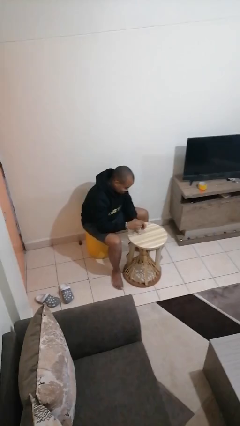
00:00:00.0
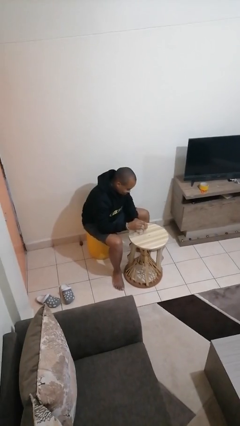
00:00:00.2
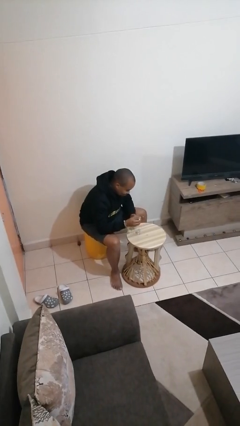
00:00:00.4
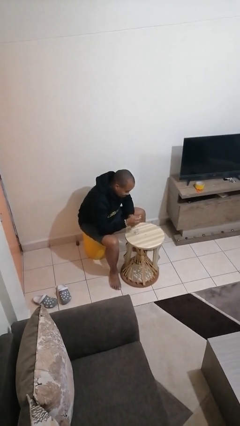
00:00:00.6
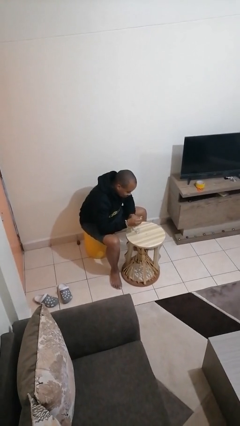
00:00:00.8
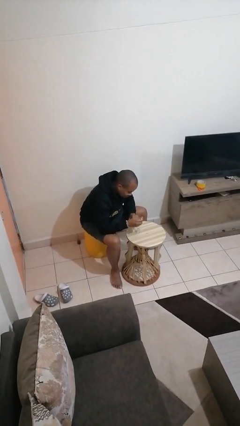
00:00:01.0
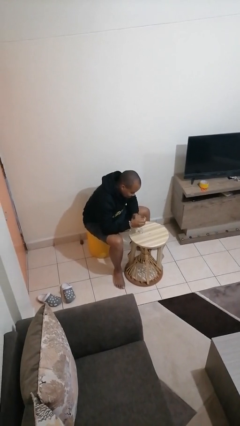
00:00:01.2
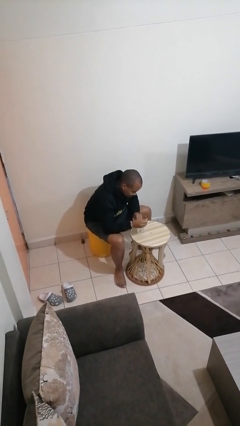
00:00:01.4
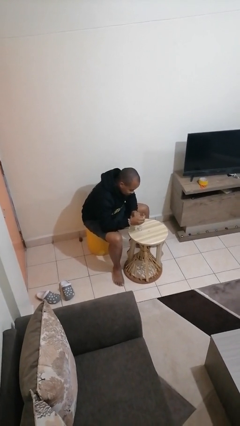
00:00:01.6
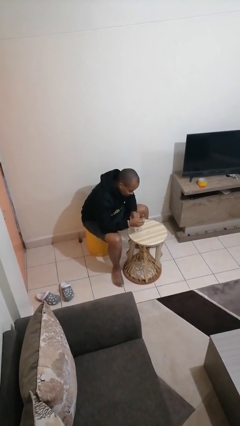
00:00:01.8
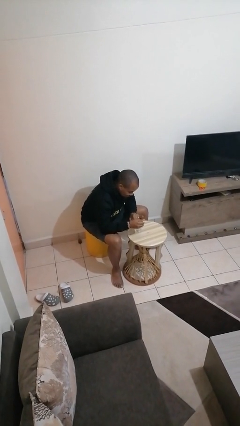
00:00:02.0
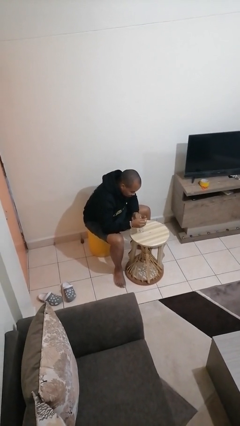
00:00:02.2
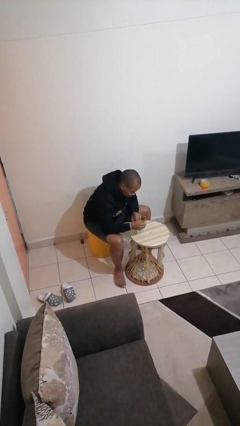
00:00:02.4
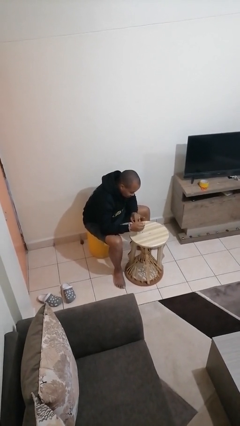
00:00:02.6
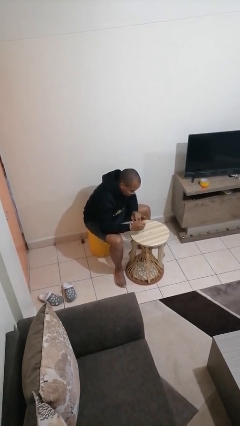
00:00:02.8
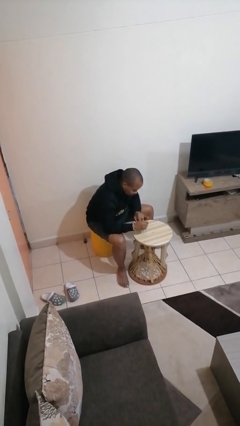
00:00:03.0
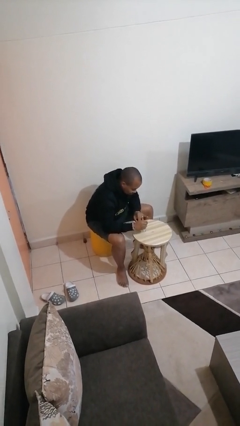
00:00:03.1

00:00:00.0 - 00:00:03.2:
person paints fingernails

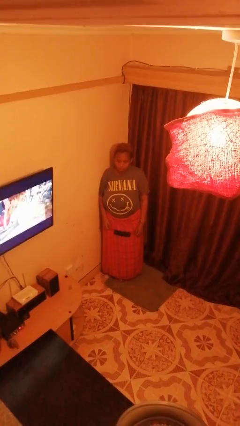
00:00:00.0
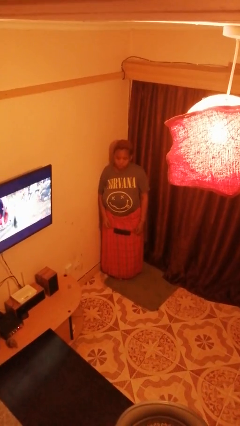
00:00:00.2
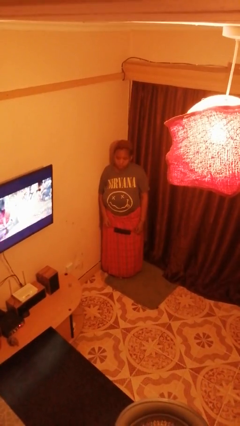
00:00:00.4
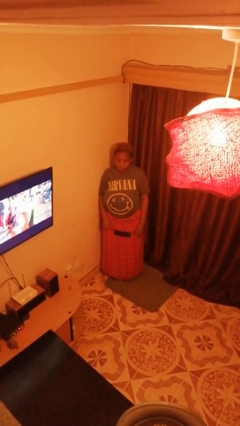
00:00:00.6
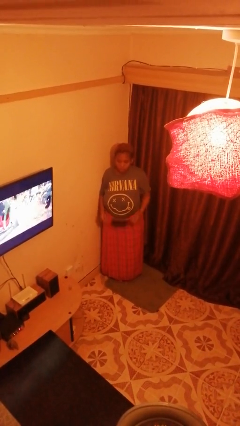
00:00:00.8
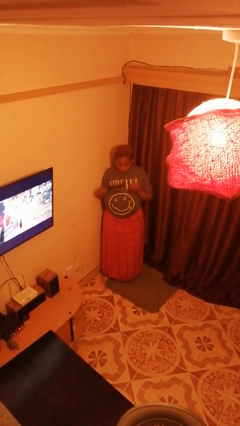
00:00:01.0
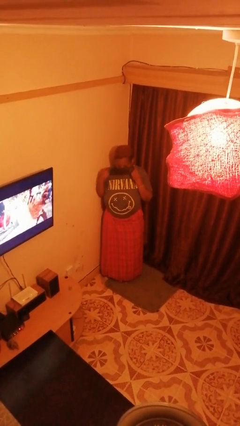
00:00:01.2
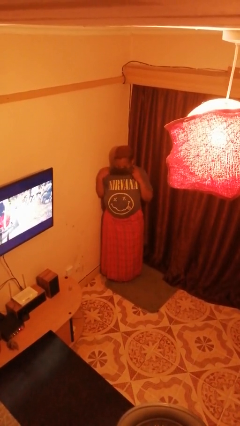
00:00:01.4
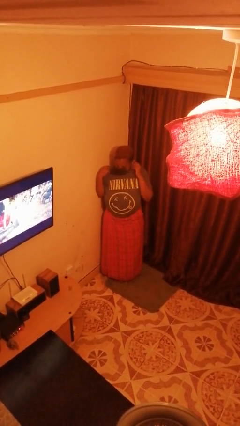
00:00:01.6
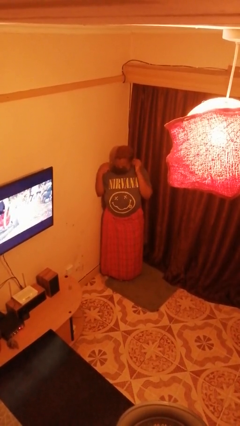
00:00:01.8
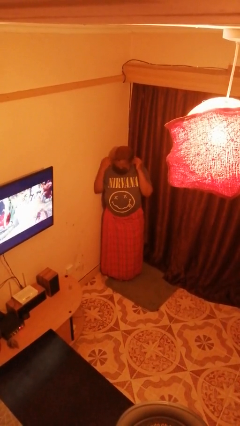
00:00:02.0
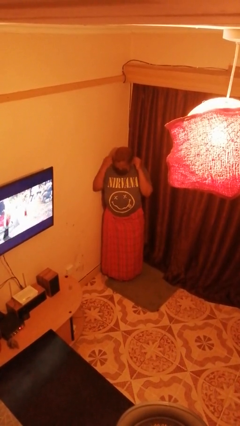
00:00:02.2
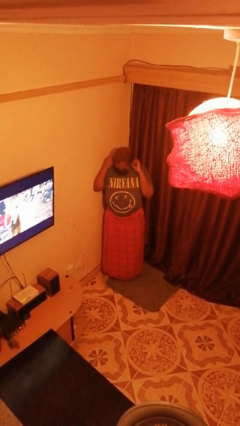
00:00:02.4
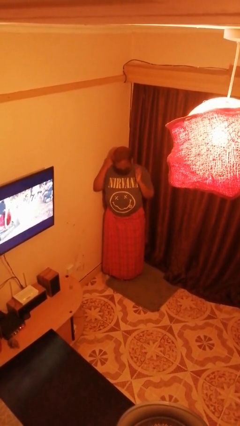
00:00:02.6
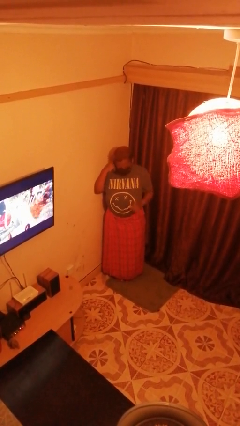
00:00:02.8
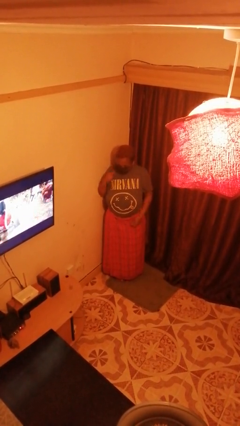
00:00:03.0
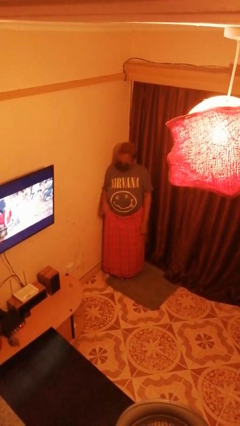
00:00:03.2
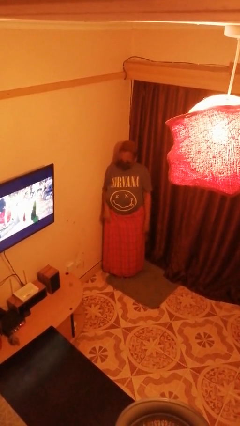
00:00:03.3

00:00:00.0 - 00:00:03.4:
person puts on facemask

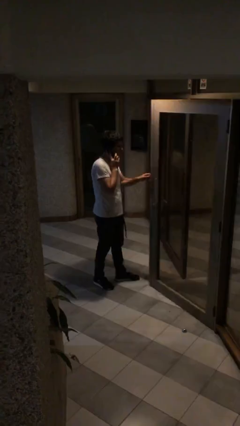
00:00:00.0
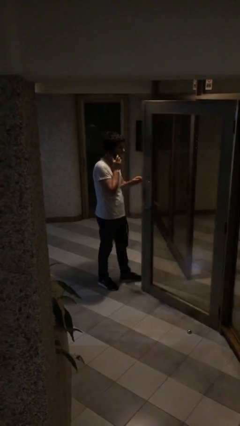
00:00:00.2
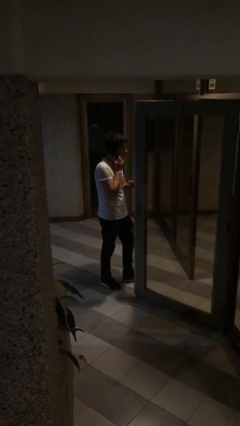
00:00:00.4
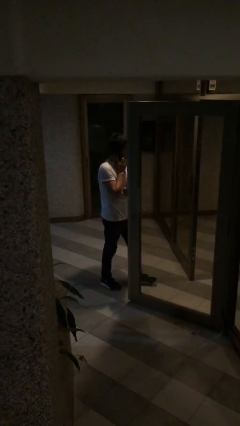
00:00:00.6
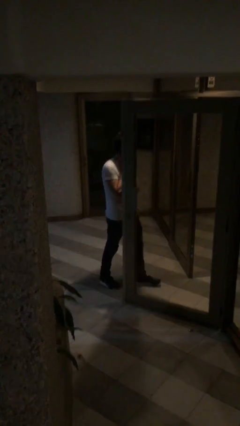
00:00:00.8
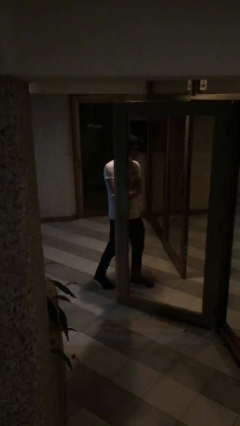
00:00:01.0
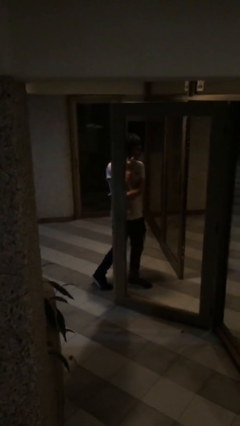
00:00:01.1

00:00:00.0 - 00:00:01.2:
person opens facility door

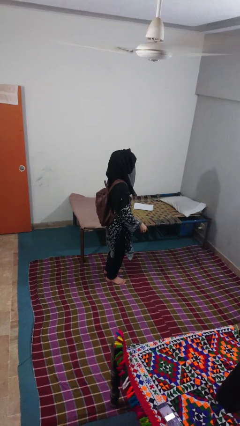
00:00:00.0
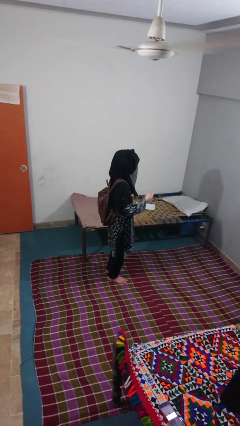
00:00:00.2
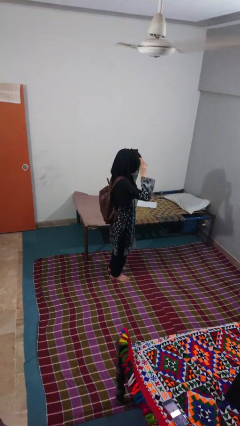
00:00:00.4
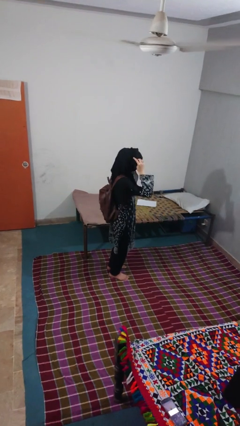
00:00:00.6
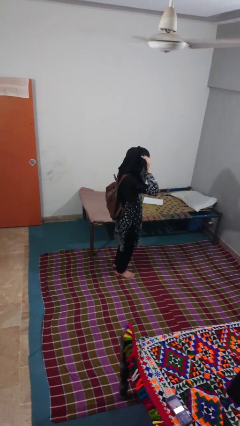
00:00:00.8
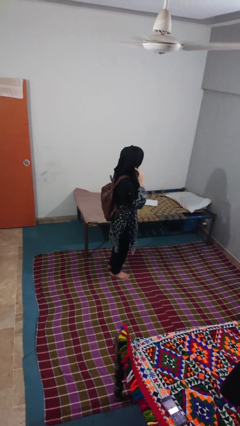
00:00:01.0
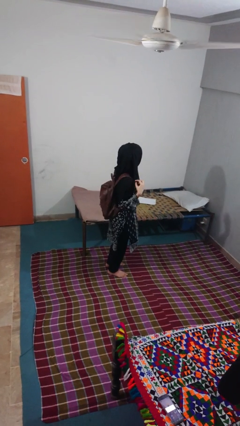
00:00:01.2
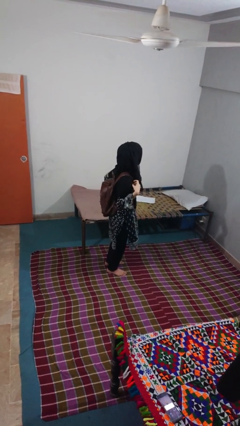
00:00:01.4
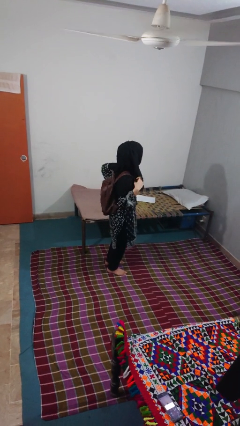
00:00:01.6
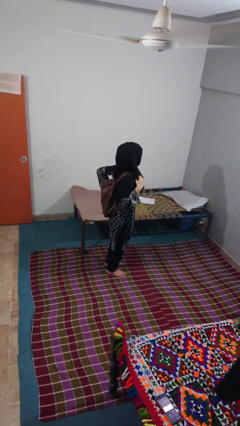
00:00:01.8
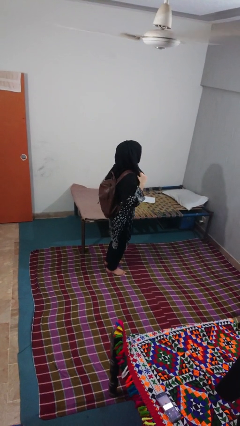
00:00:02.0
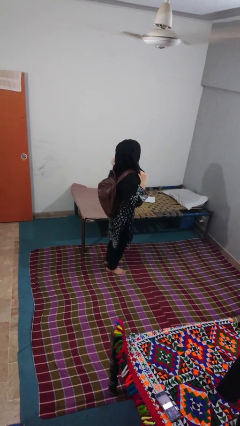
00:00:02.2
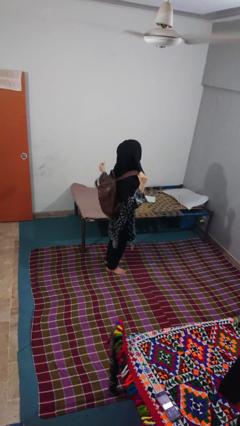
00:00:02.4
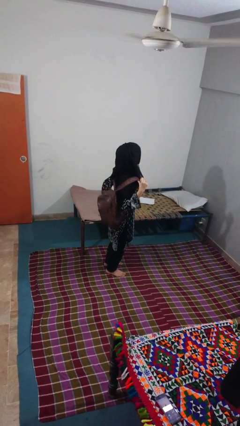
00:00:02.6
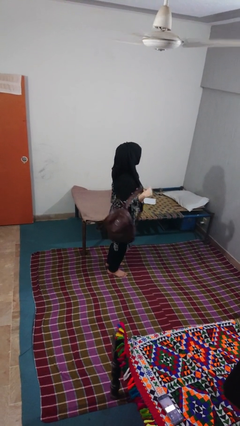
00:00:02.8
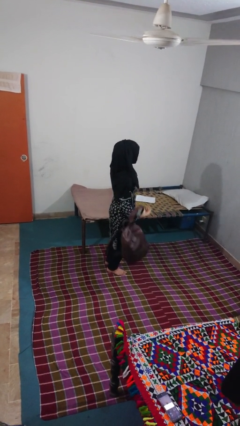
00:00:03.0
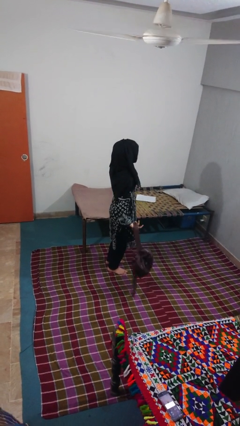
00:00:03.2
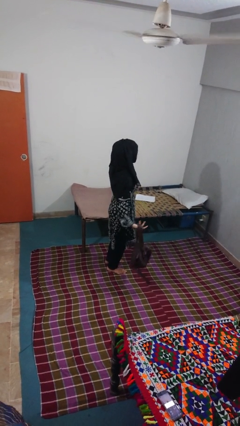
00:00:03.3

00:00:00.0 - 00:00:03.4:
person takes off backpack

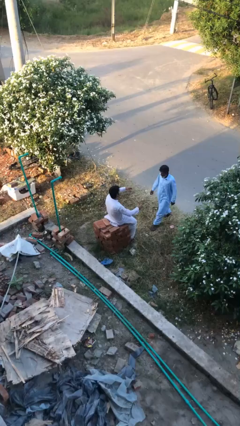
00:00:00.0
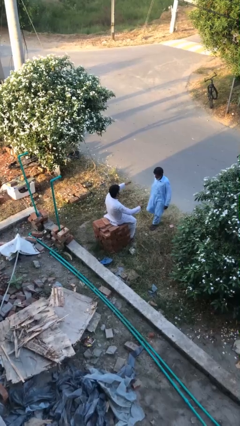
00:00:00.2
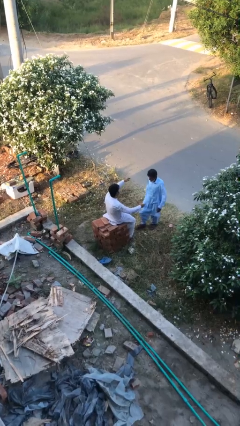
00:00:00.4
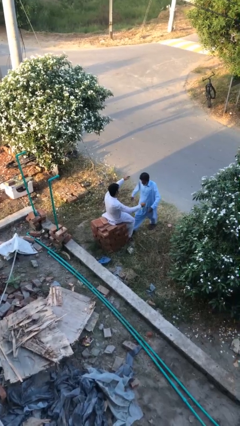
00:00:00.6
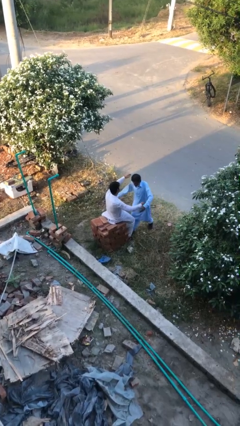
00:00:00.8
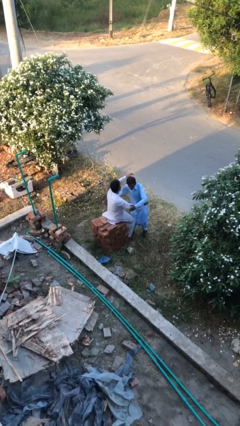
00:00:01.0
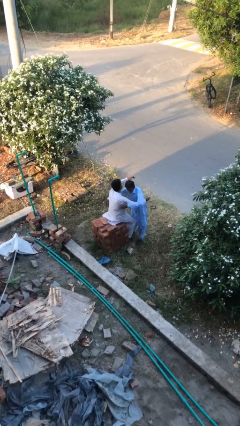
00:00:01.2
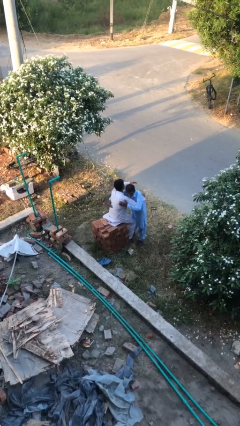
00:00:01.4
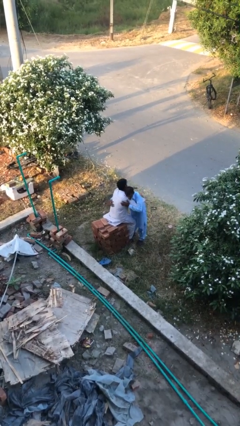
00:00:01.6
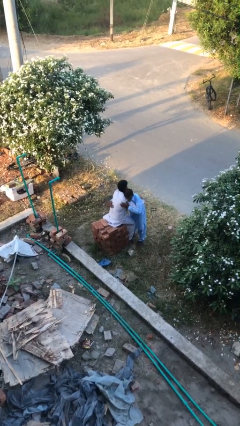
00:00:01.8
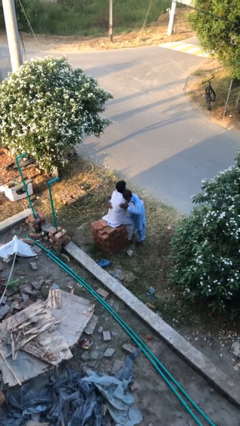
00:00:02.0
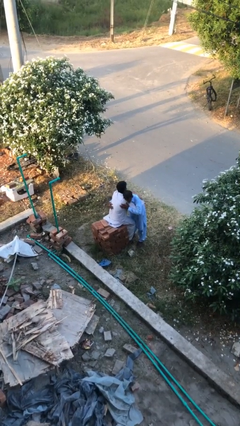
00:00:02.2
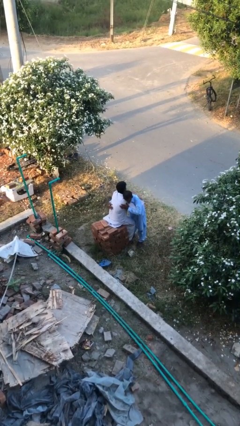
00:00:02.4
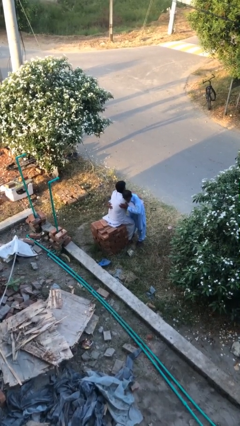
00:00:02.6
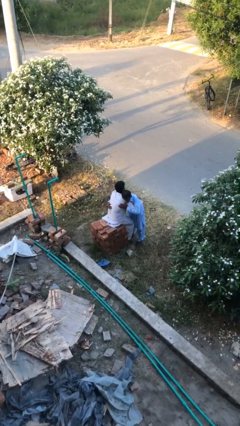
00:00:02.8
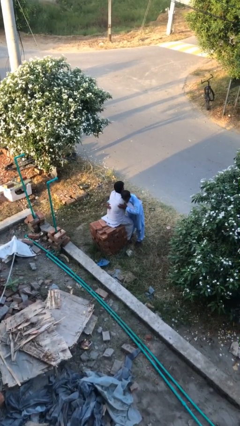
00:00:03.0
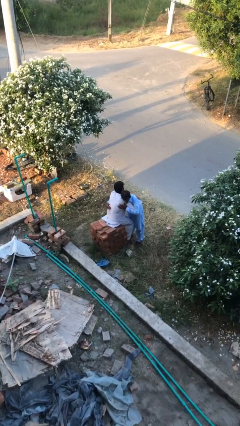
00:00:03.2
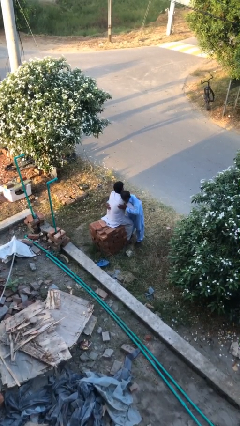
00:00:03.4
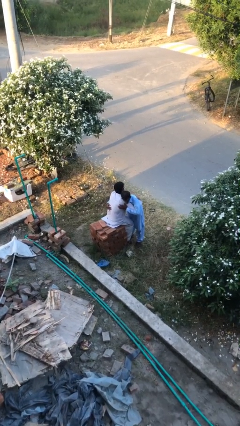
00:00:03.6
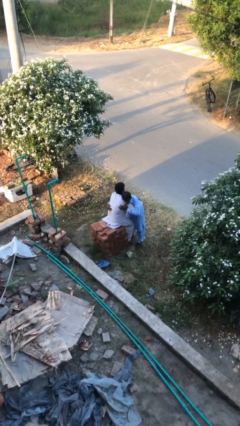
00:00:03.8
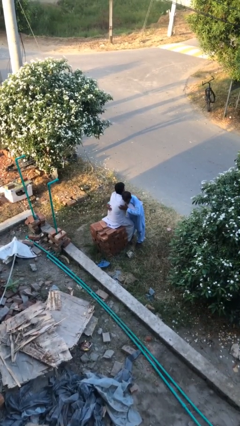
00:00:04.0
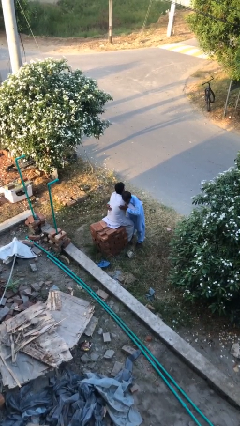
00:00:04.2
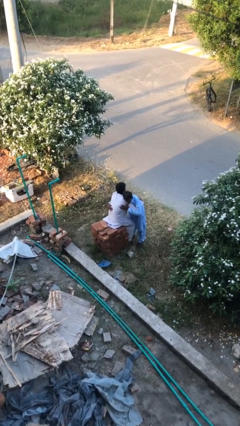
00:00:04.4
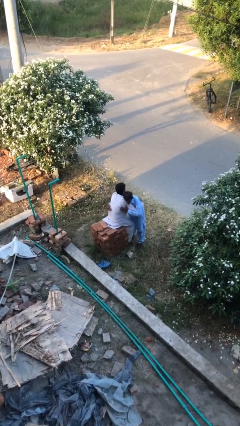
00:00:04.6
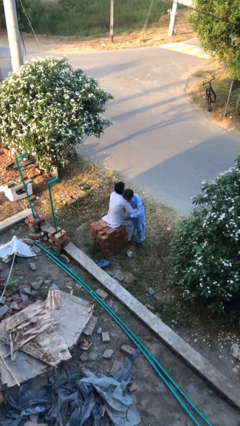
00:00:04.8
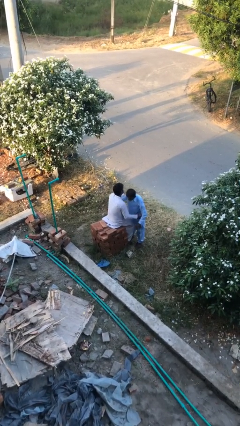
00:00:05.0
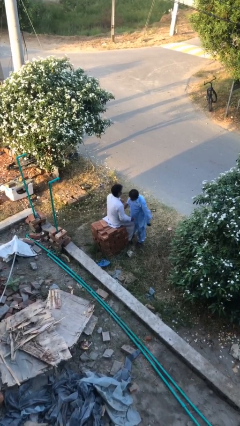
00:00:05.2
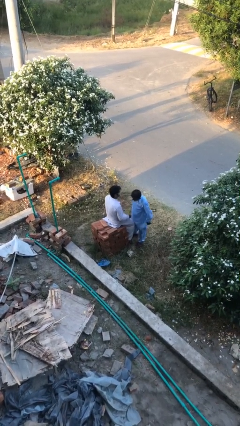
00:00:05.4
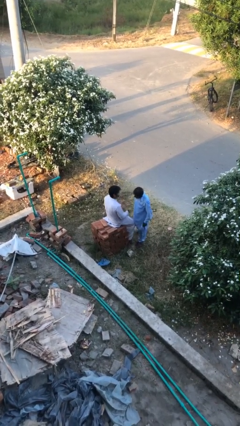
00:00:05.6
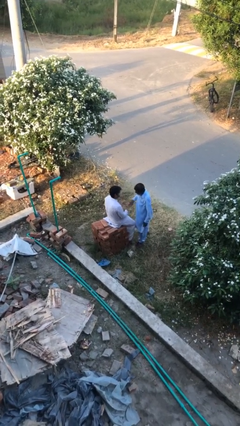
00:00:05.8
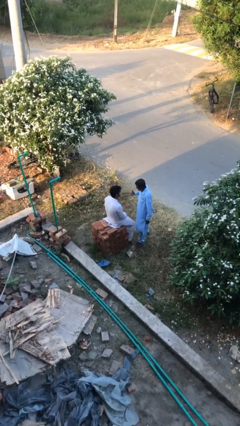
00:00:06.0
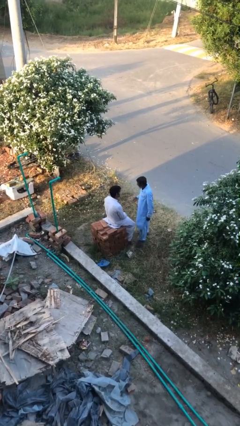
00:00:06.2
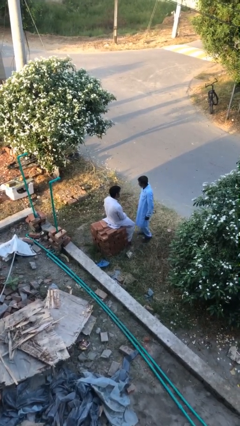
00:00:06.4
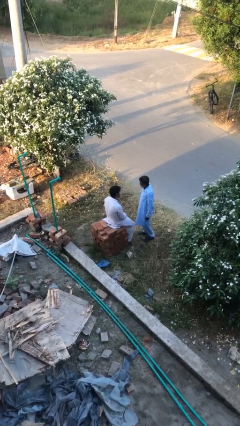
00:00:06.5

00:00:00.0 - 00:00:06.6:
person embraces person
